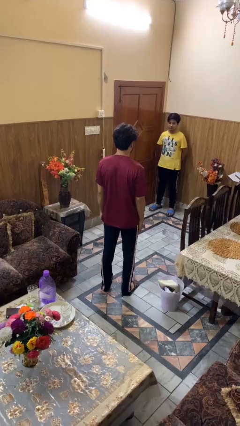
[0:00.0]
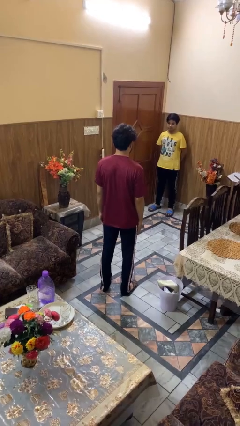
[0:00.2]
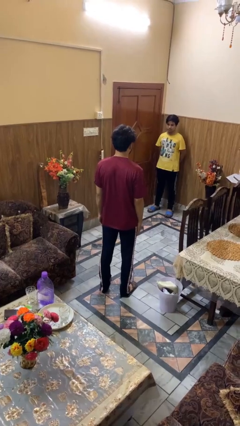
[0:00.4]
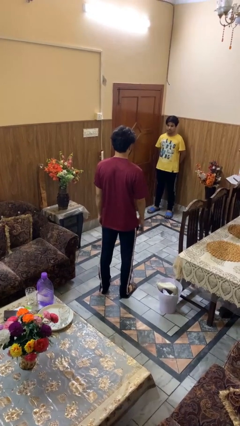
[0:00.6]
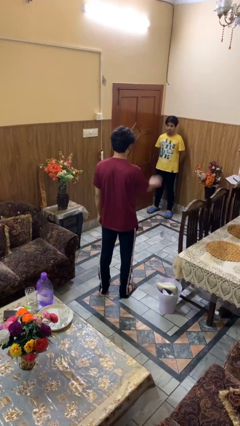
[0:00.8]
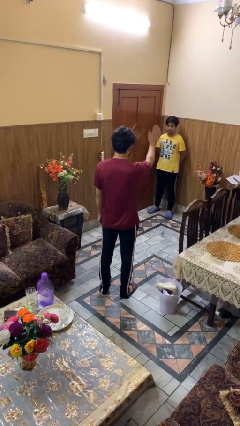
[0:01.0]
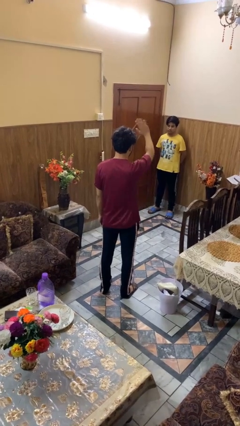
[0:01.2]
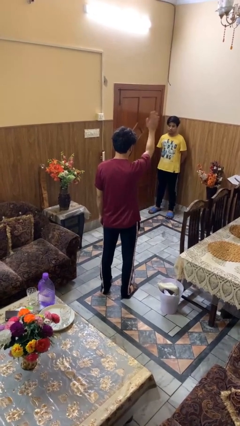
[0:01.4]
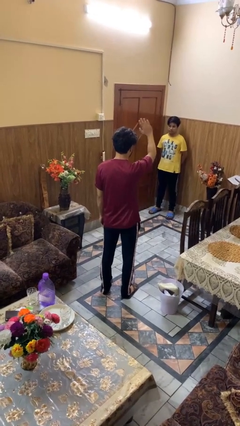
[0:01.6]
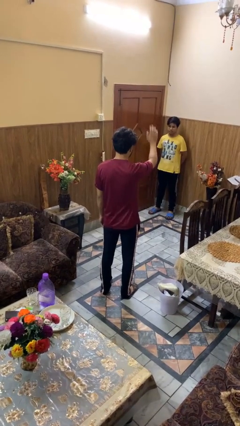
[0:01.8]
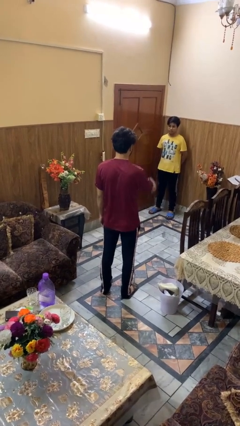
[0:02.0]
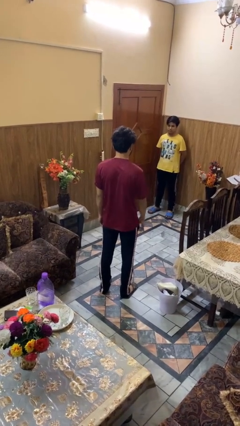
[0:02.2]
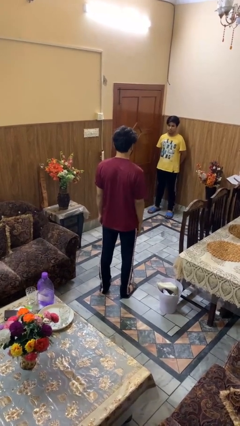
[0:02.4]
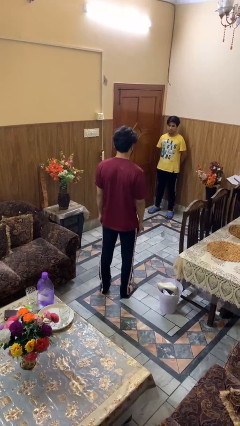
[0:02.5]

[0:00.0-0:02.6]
person waves at person

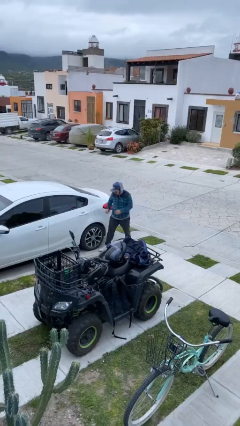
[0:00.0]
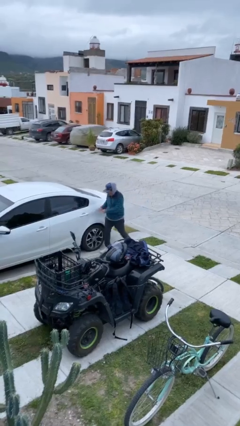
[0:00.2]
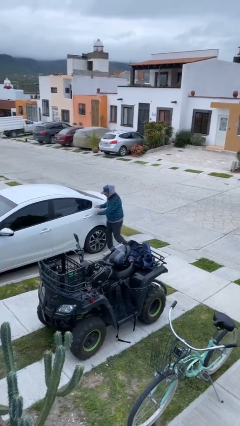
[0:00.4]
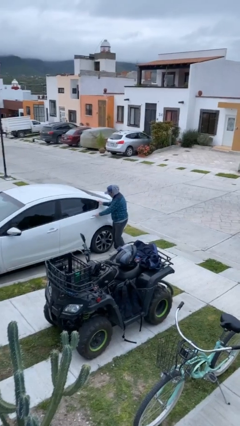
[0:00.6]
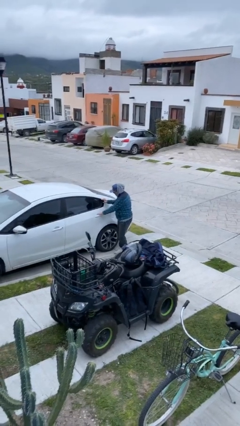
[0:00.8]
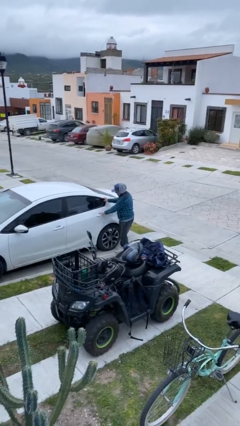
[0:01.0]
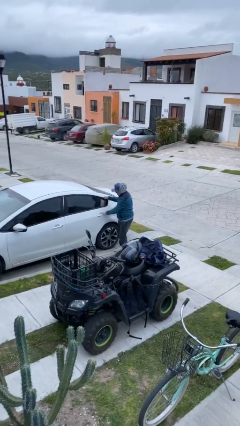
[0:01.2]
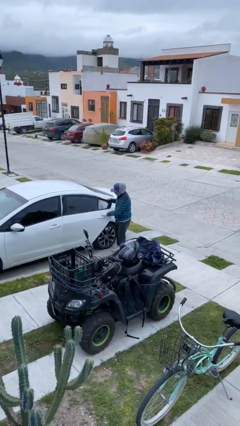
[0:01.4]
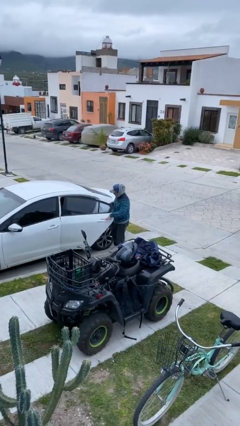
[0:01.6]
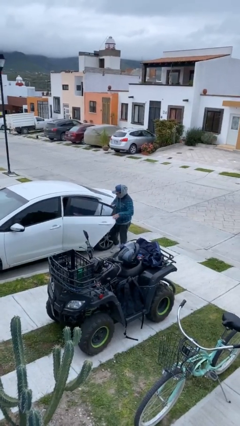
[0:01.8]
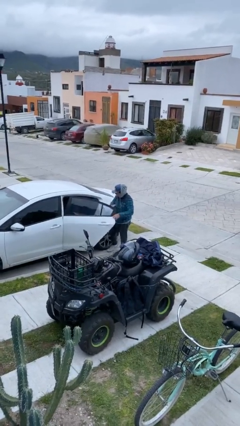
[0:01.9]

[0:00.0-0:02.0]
person opens car door

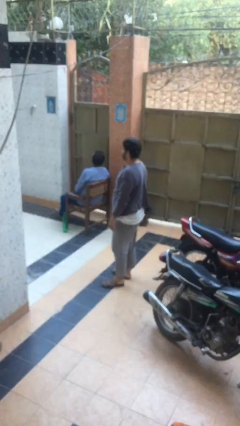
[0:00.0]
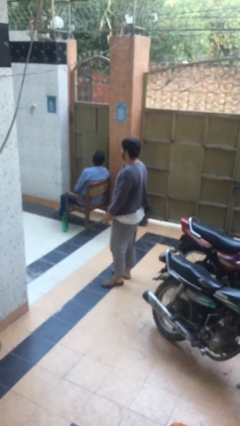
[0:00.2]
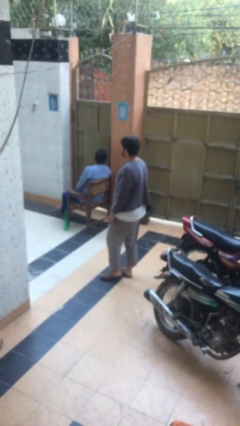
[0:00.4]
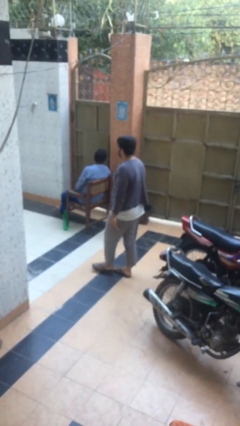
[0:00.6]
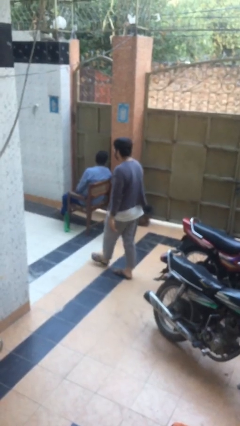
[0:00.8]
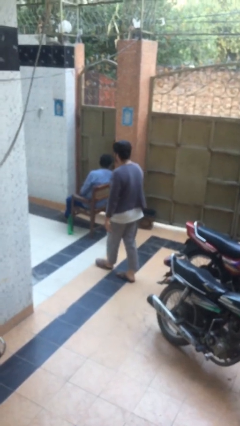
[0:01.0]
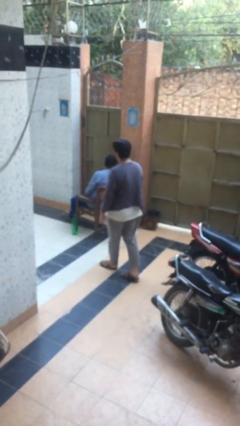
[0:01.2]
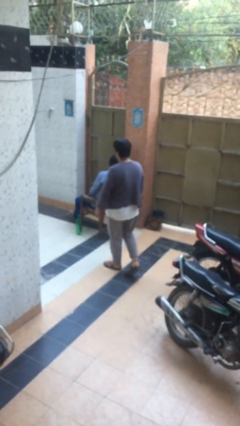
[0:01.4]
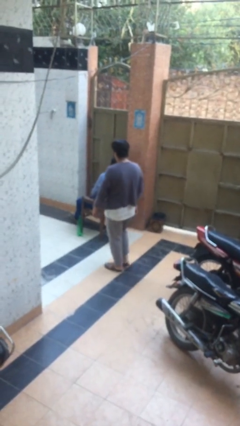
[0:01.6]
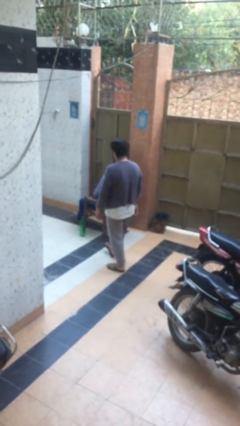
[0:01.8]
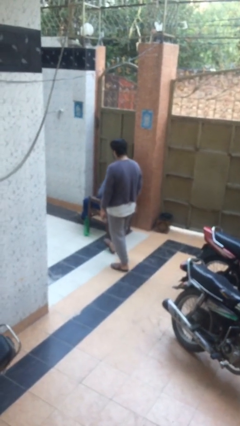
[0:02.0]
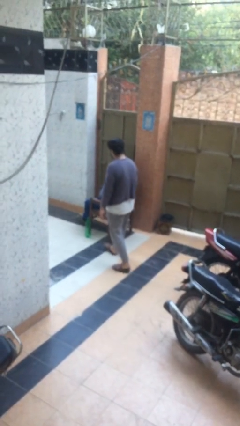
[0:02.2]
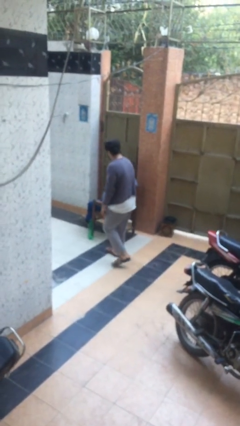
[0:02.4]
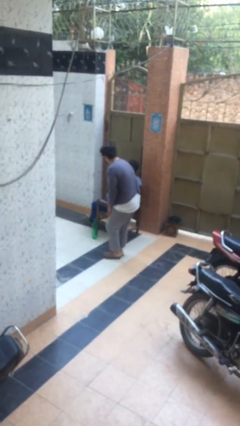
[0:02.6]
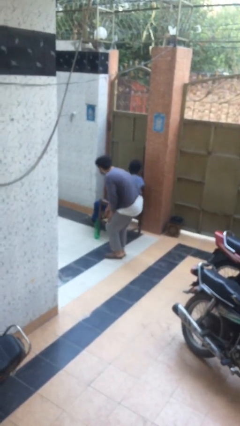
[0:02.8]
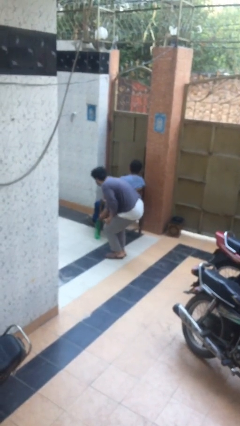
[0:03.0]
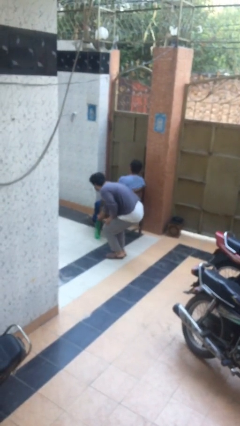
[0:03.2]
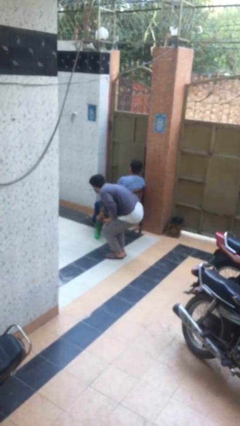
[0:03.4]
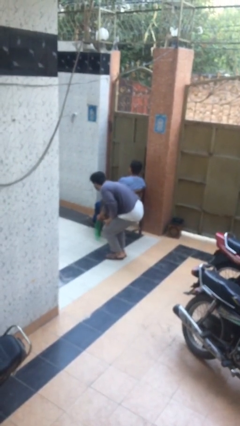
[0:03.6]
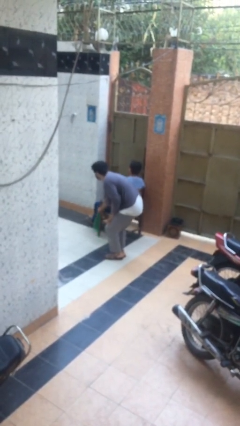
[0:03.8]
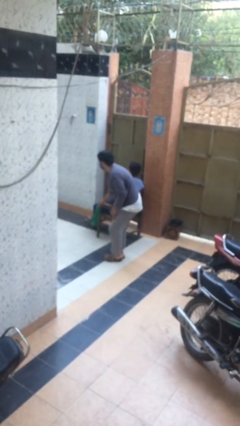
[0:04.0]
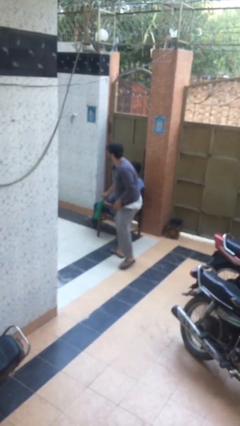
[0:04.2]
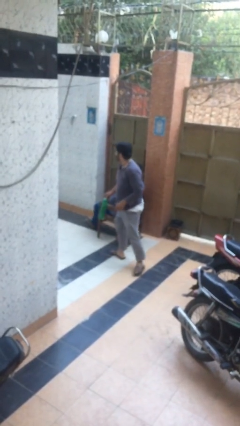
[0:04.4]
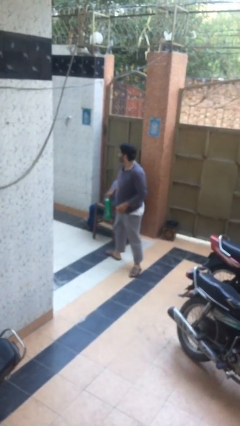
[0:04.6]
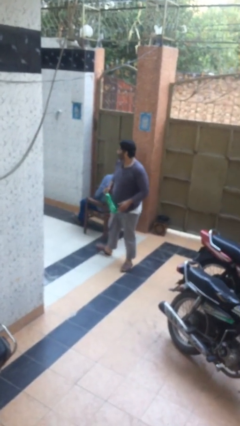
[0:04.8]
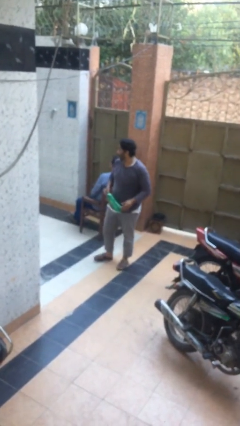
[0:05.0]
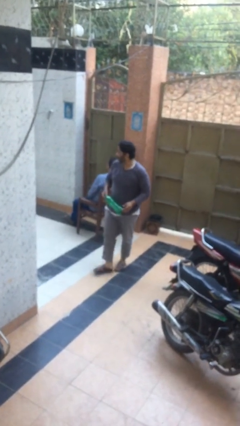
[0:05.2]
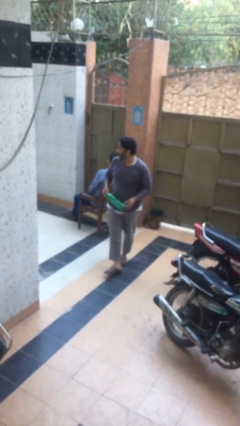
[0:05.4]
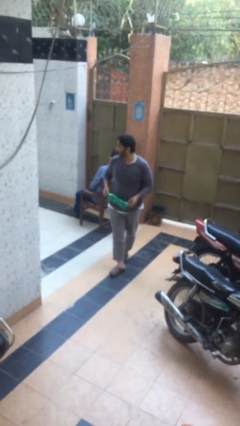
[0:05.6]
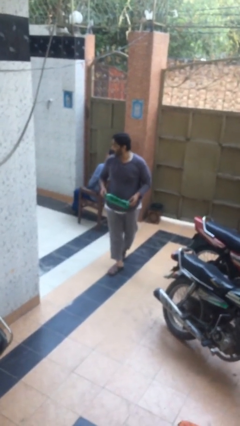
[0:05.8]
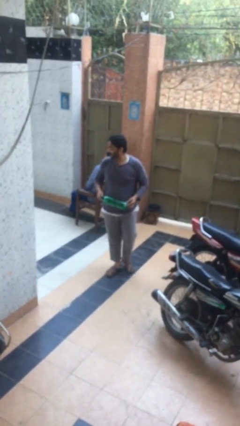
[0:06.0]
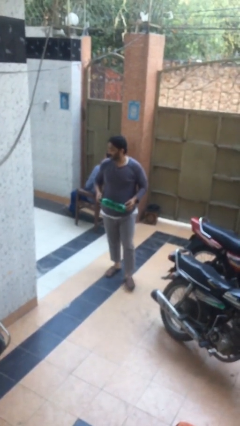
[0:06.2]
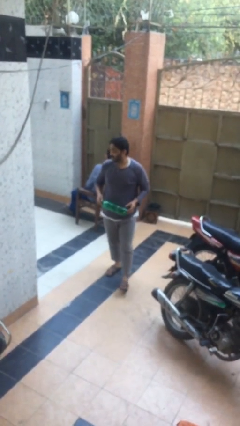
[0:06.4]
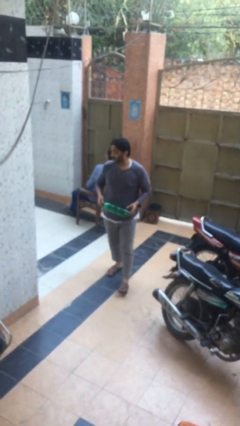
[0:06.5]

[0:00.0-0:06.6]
person steals object from person

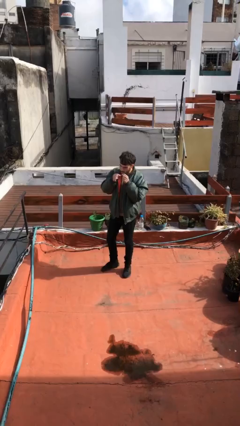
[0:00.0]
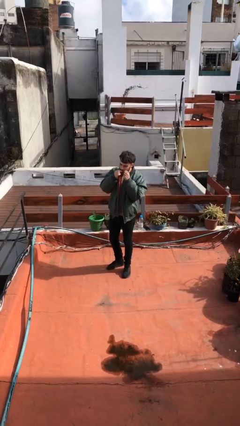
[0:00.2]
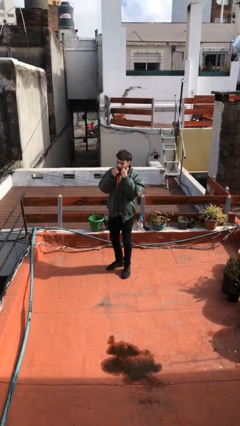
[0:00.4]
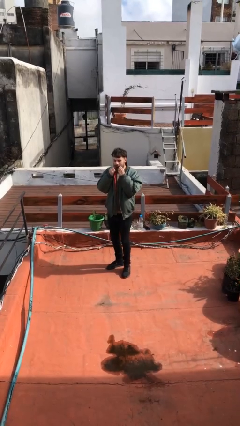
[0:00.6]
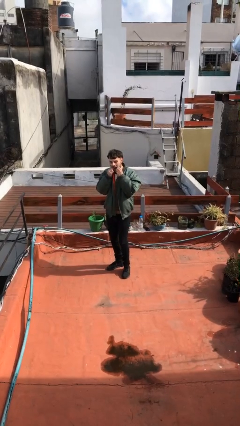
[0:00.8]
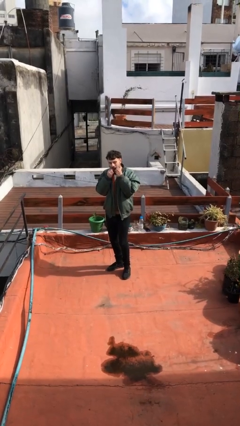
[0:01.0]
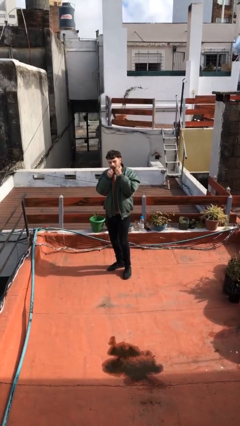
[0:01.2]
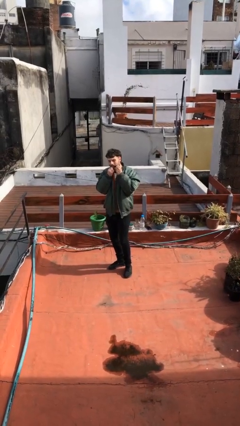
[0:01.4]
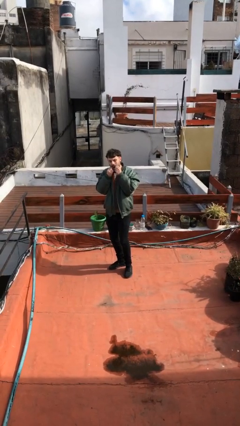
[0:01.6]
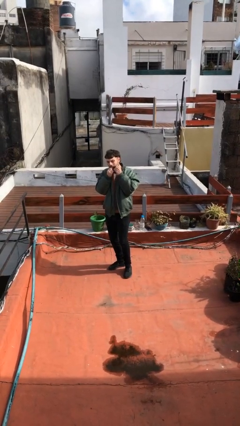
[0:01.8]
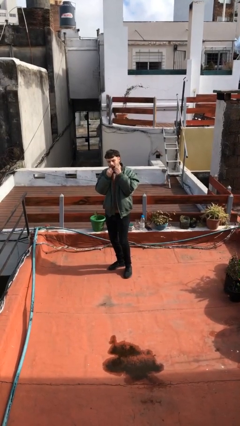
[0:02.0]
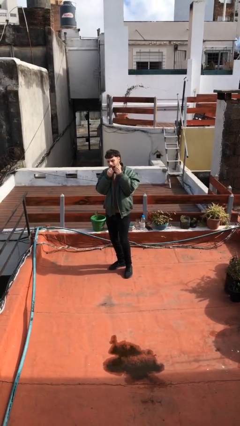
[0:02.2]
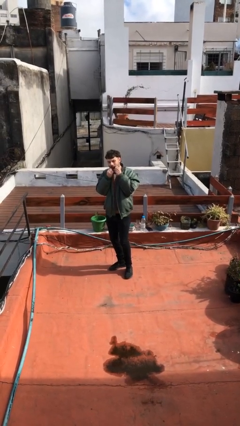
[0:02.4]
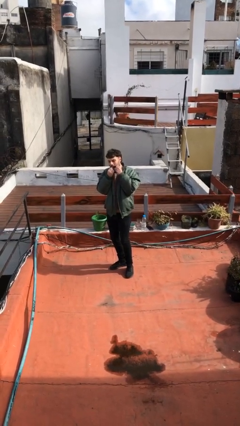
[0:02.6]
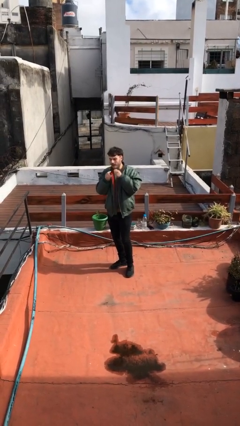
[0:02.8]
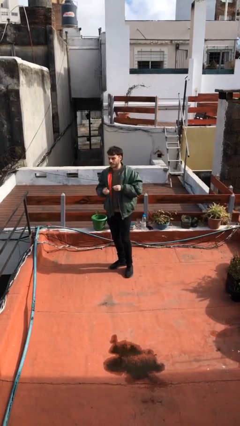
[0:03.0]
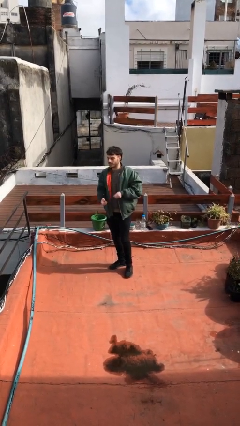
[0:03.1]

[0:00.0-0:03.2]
person flosses

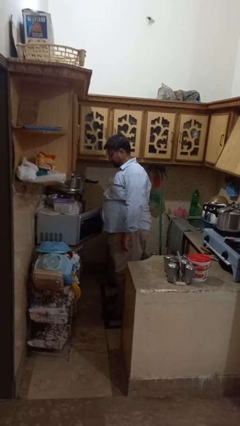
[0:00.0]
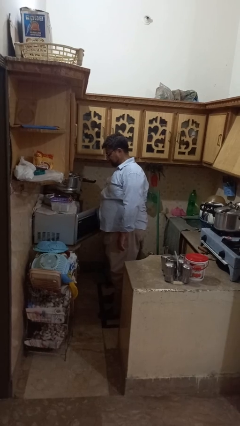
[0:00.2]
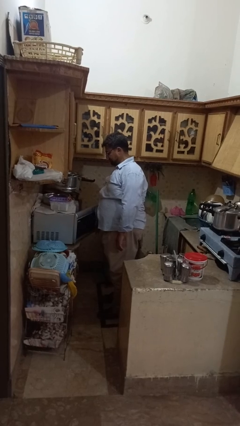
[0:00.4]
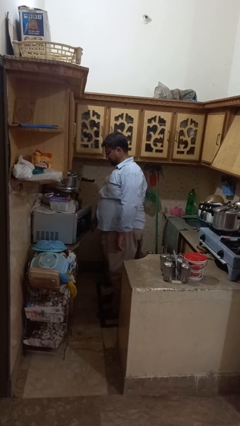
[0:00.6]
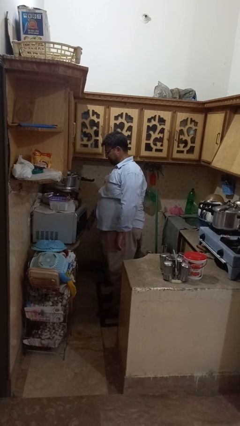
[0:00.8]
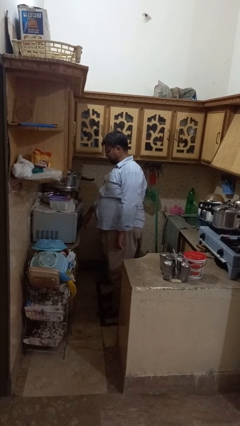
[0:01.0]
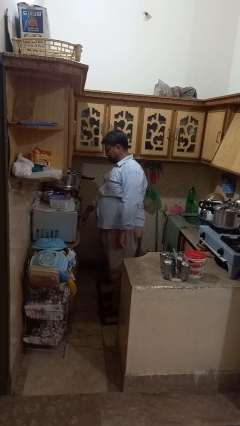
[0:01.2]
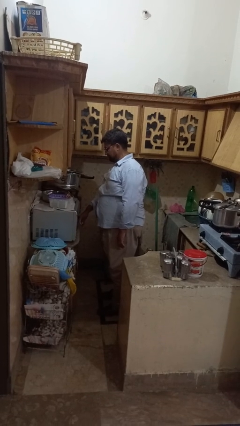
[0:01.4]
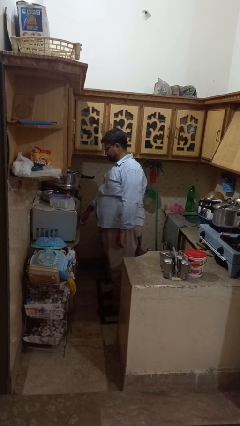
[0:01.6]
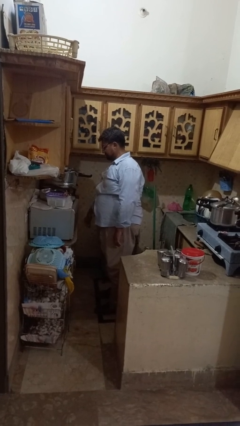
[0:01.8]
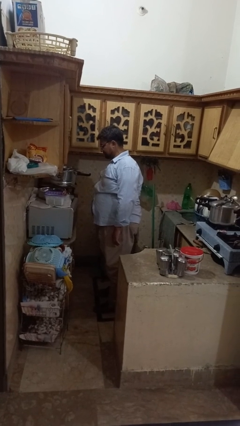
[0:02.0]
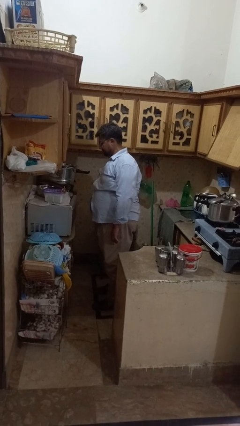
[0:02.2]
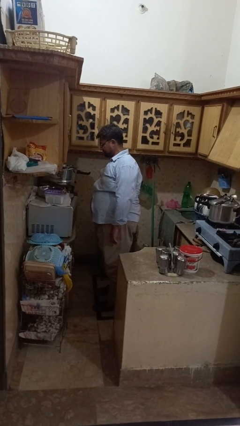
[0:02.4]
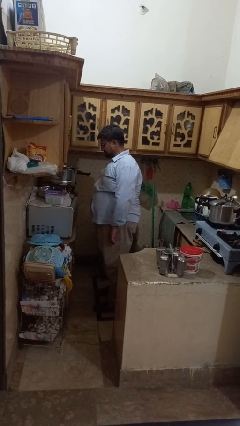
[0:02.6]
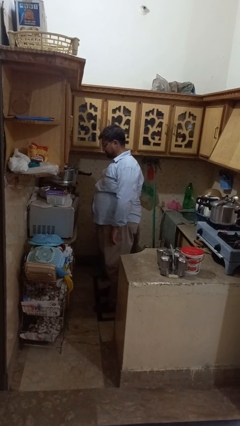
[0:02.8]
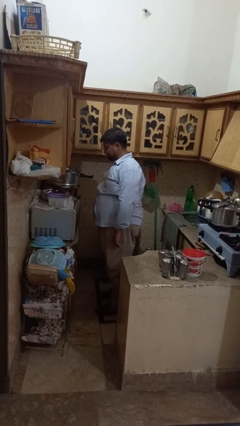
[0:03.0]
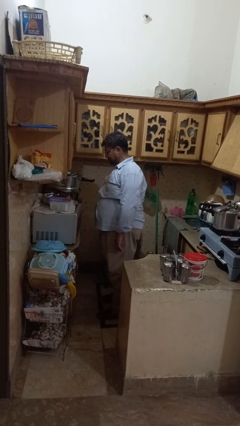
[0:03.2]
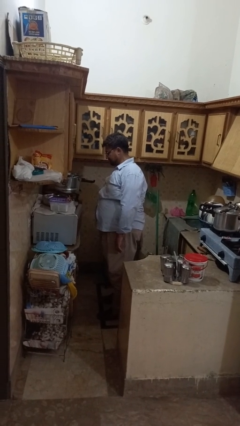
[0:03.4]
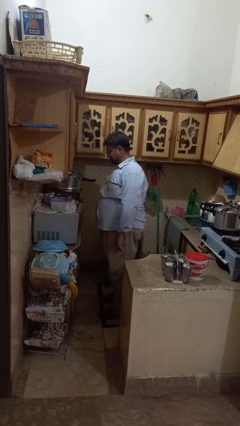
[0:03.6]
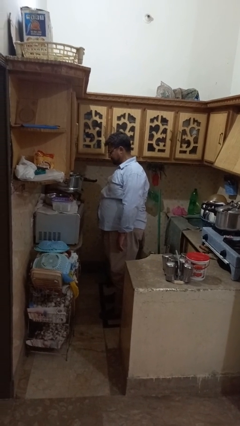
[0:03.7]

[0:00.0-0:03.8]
person closes microwave
